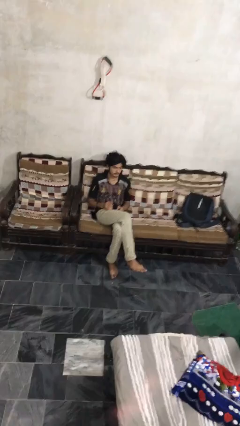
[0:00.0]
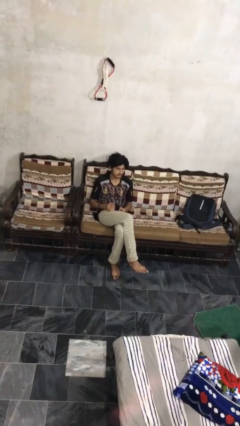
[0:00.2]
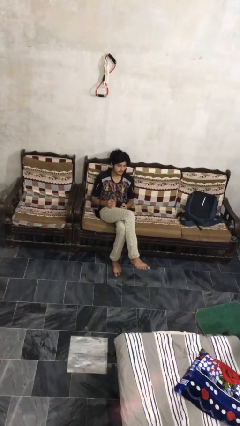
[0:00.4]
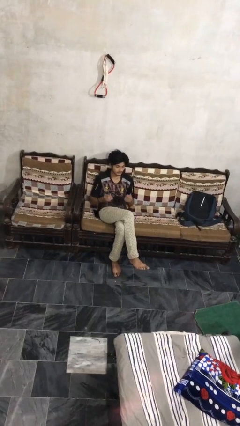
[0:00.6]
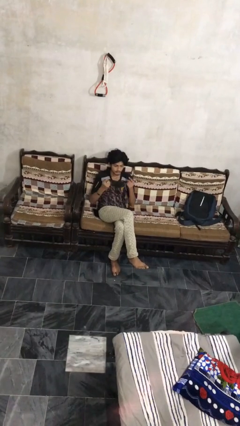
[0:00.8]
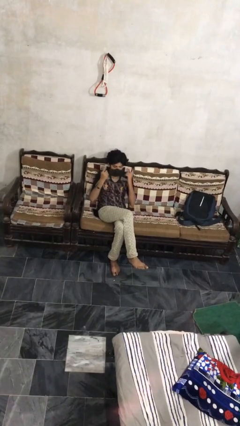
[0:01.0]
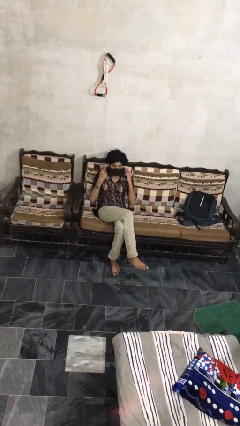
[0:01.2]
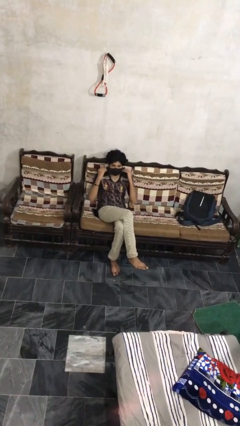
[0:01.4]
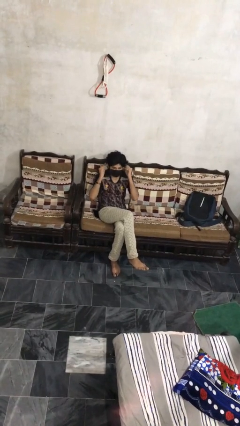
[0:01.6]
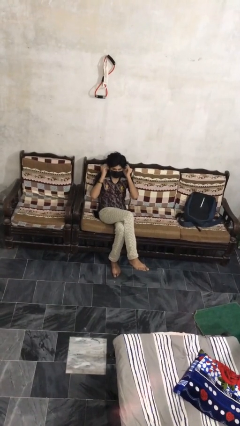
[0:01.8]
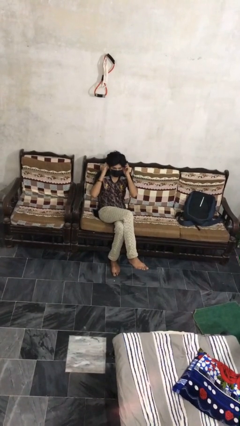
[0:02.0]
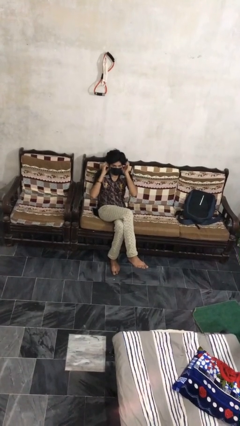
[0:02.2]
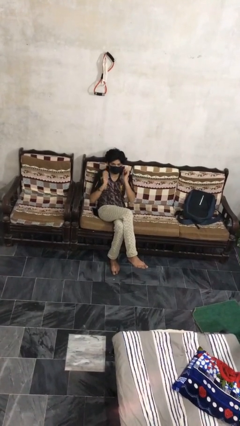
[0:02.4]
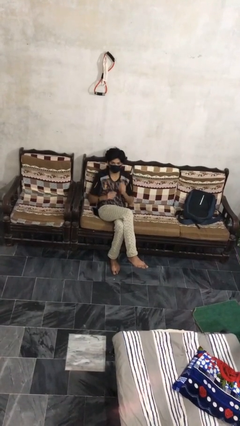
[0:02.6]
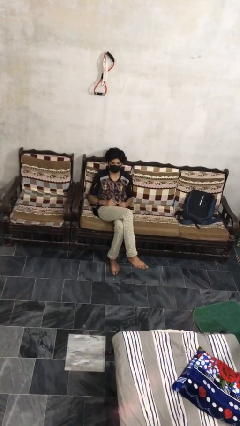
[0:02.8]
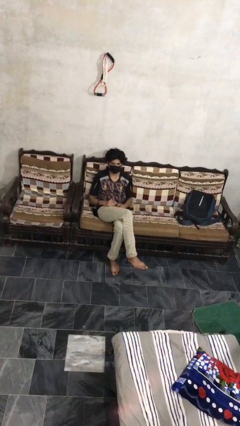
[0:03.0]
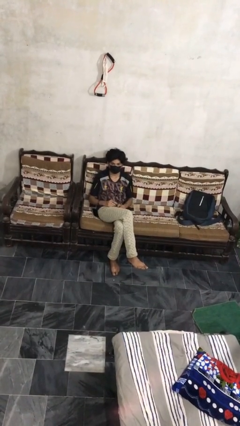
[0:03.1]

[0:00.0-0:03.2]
person puts on facemask

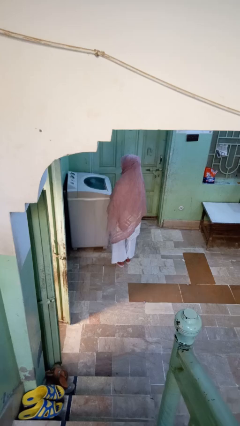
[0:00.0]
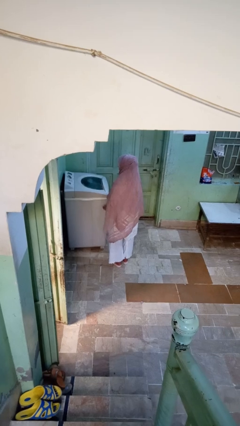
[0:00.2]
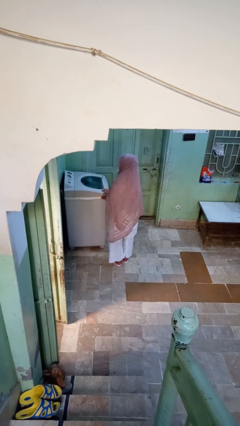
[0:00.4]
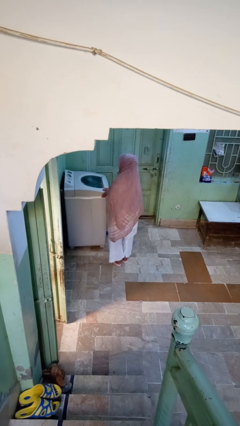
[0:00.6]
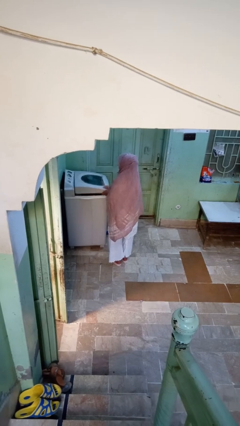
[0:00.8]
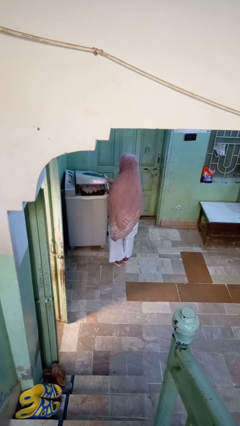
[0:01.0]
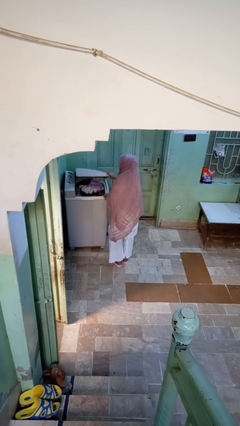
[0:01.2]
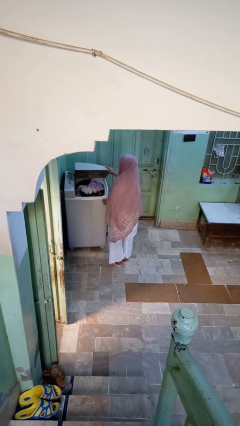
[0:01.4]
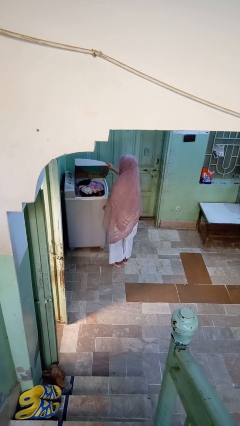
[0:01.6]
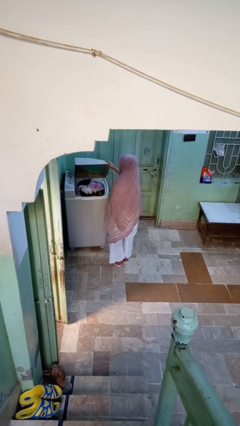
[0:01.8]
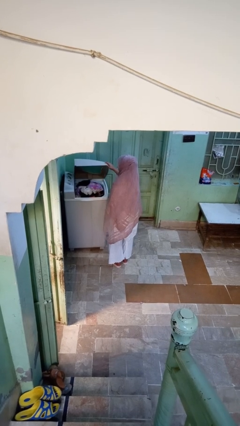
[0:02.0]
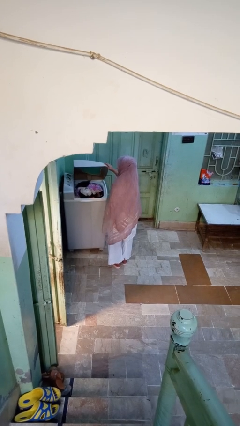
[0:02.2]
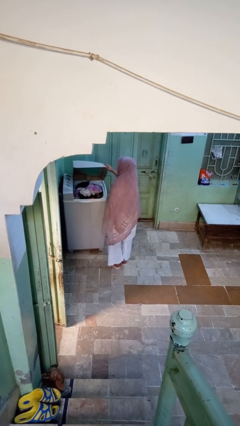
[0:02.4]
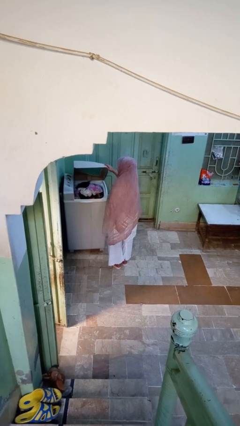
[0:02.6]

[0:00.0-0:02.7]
person opens clothes washer

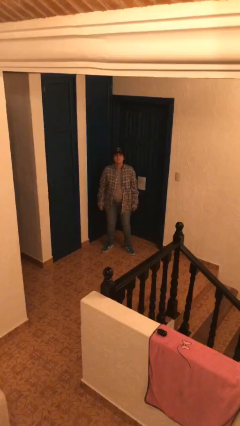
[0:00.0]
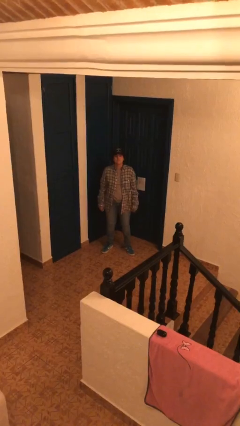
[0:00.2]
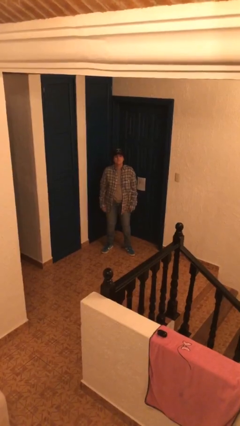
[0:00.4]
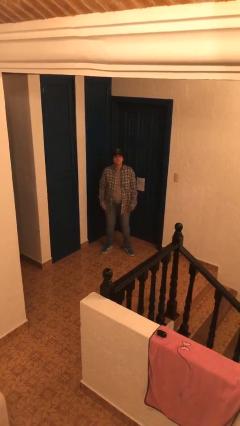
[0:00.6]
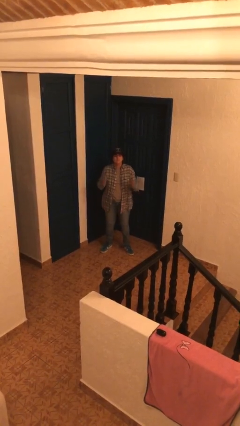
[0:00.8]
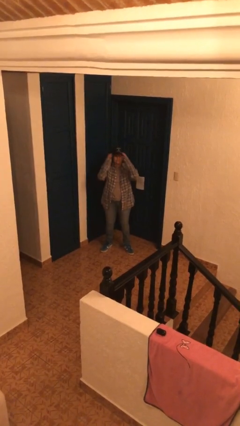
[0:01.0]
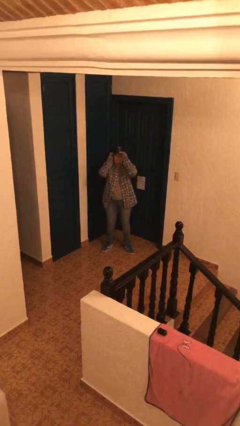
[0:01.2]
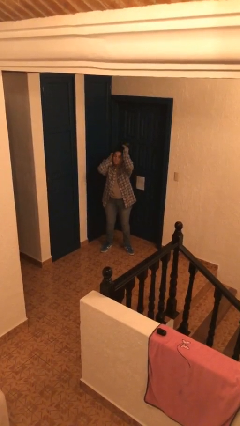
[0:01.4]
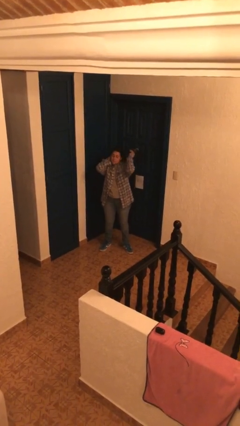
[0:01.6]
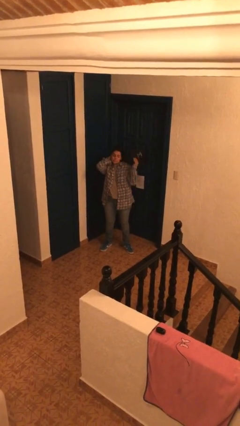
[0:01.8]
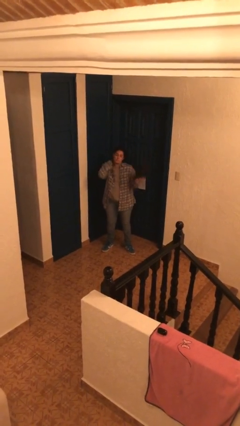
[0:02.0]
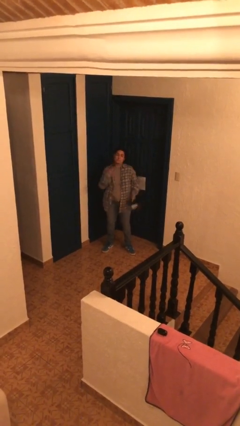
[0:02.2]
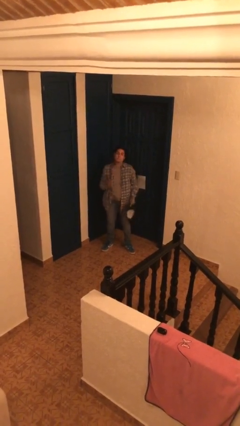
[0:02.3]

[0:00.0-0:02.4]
person takes off hat

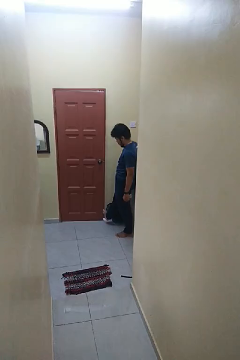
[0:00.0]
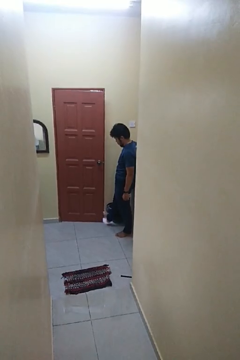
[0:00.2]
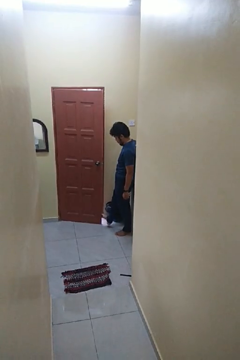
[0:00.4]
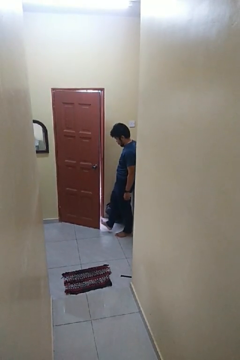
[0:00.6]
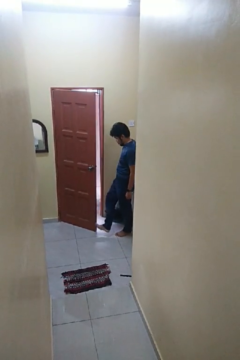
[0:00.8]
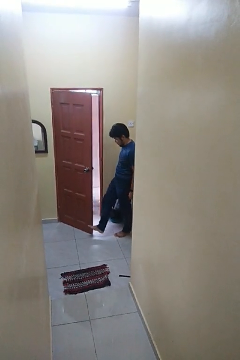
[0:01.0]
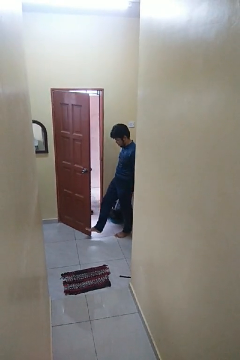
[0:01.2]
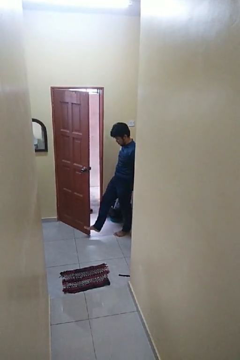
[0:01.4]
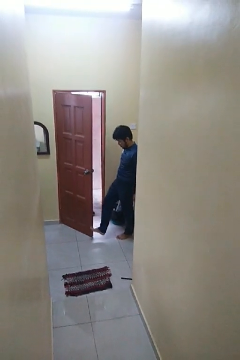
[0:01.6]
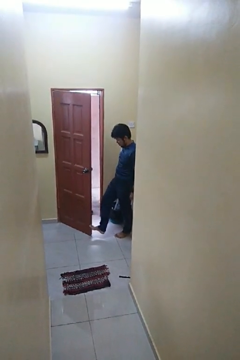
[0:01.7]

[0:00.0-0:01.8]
person opens facility door

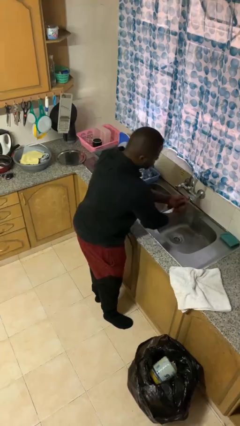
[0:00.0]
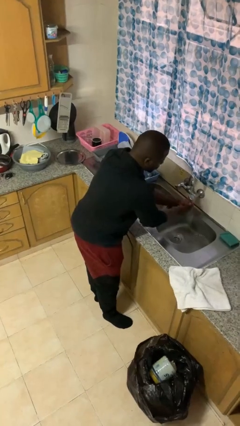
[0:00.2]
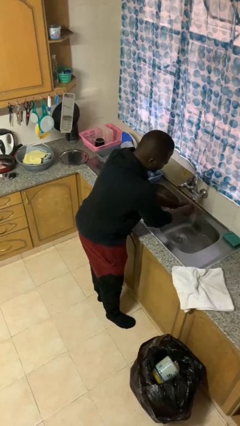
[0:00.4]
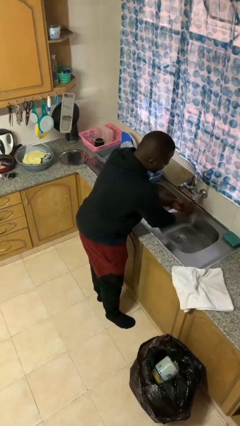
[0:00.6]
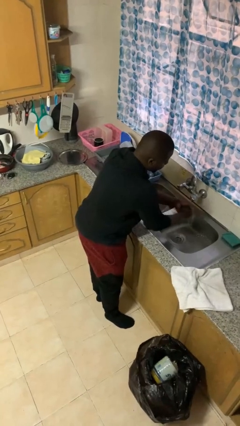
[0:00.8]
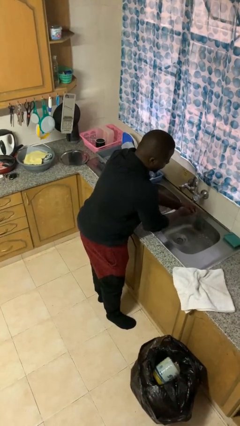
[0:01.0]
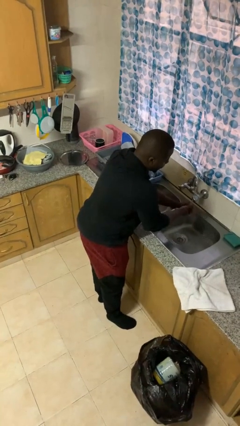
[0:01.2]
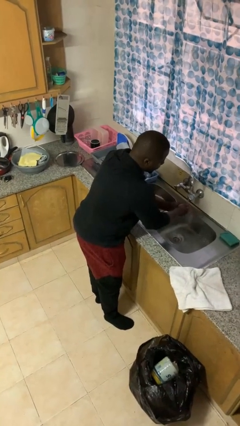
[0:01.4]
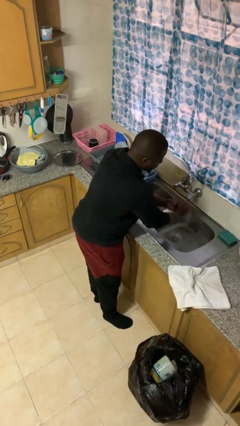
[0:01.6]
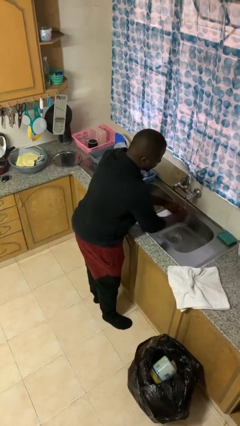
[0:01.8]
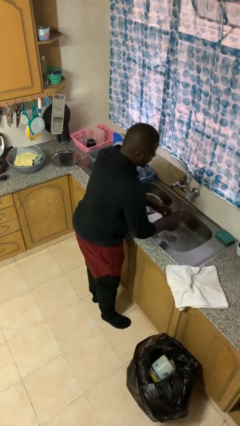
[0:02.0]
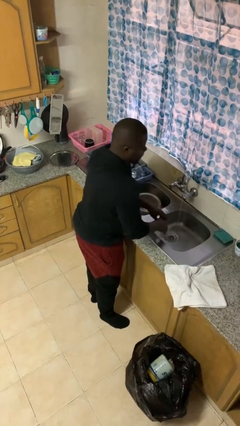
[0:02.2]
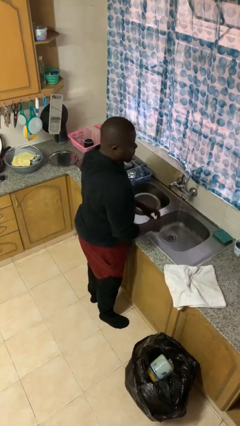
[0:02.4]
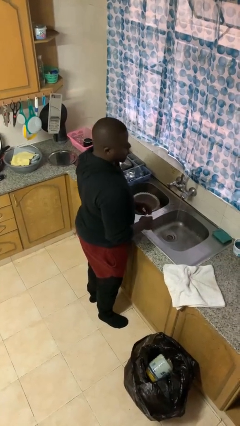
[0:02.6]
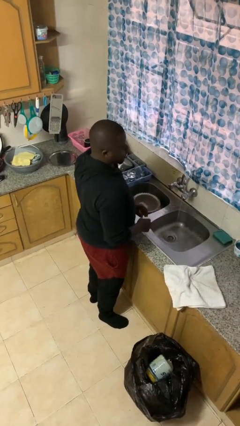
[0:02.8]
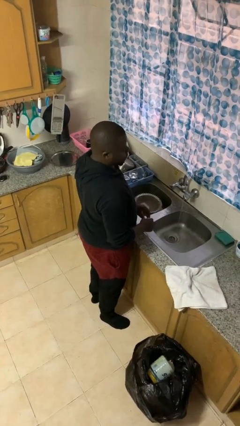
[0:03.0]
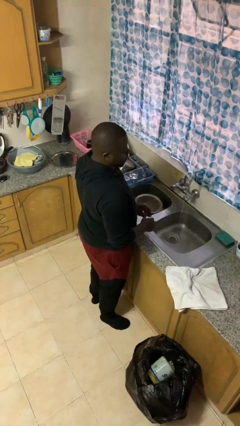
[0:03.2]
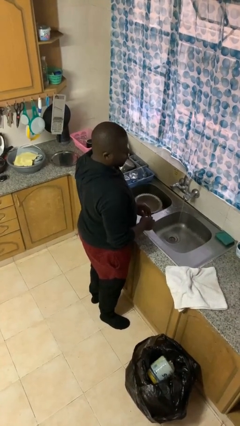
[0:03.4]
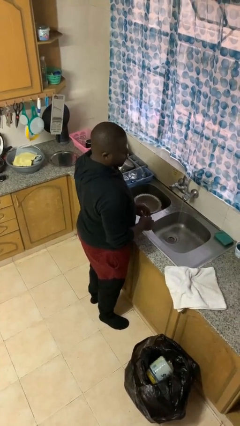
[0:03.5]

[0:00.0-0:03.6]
person washes hands

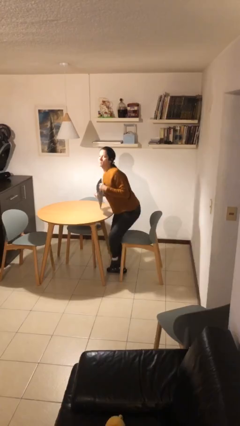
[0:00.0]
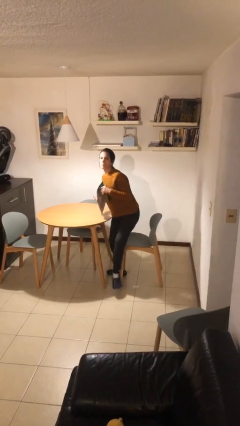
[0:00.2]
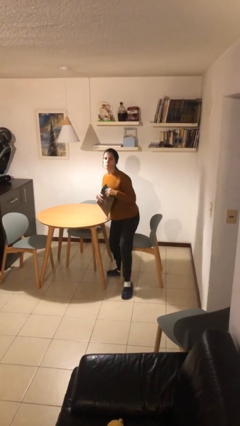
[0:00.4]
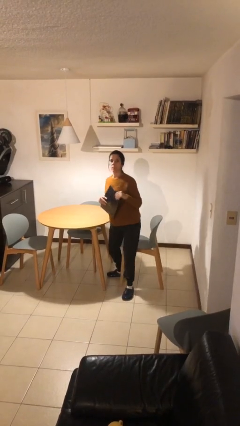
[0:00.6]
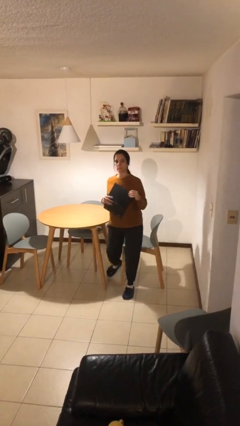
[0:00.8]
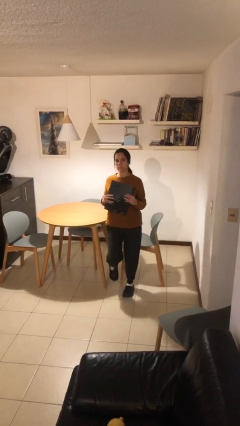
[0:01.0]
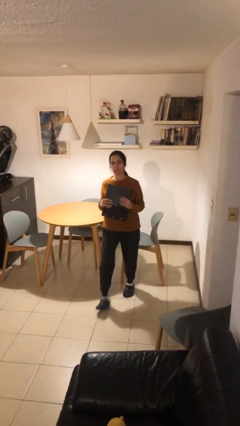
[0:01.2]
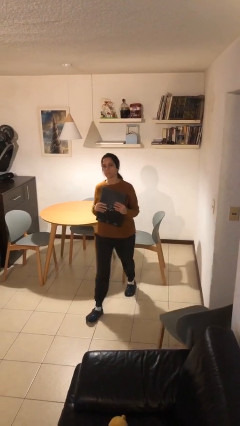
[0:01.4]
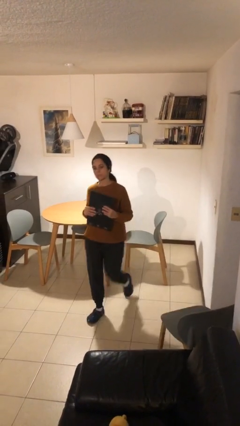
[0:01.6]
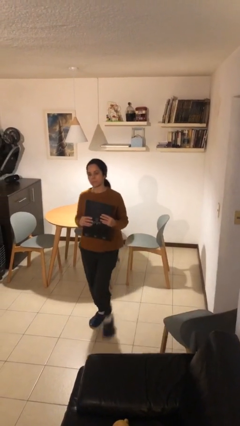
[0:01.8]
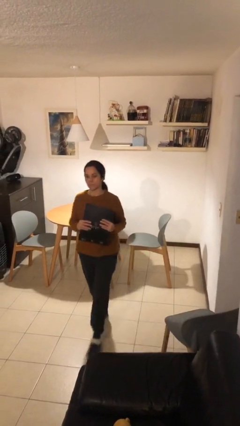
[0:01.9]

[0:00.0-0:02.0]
person stands up

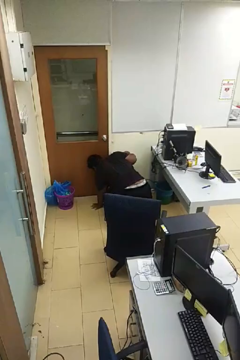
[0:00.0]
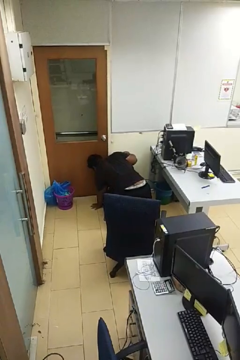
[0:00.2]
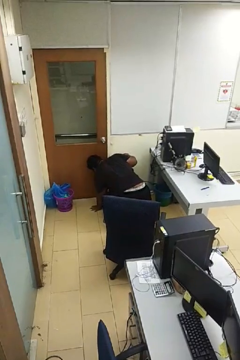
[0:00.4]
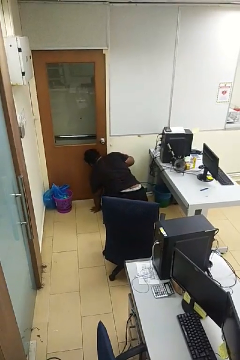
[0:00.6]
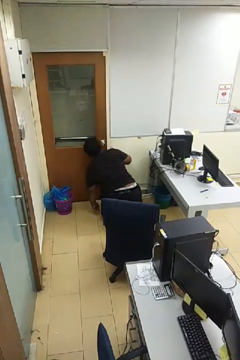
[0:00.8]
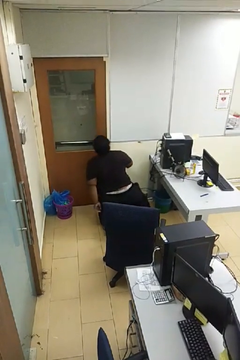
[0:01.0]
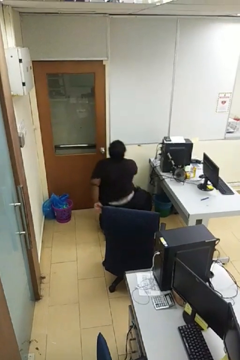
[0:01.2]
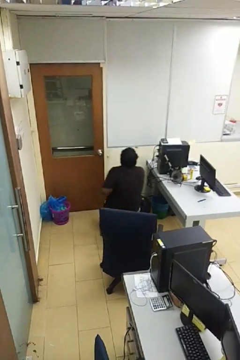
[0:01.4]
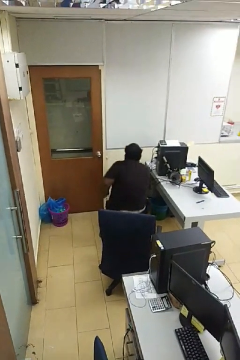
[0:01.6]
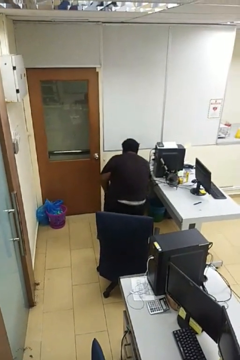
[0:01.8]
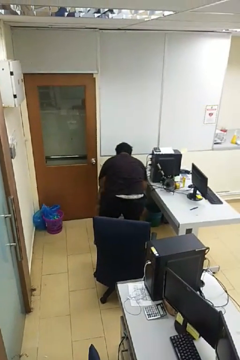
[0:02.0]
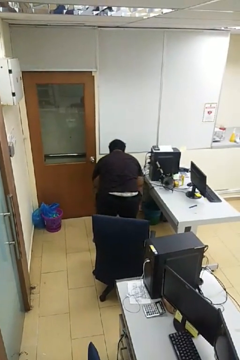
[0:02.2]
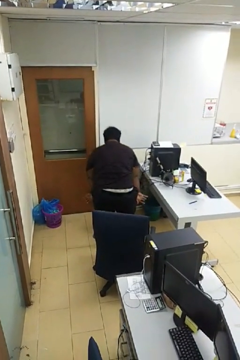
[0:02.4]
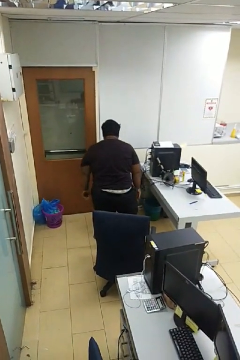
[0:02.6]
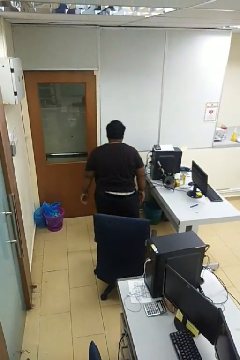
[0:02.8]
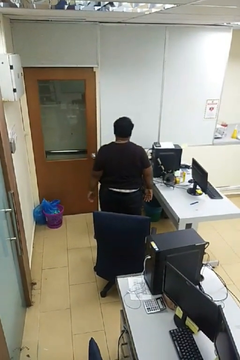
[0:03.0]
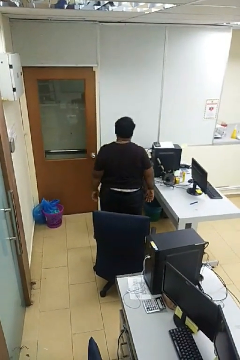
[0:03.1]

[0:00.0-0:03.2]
person stands up from floor
